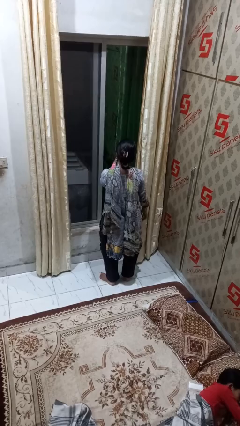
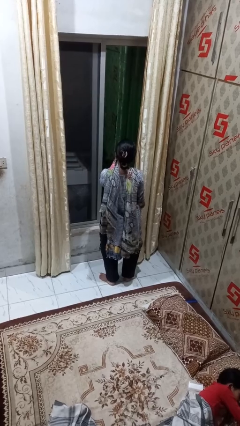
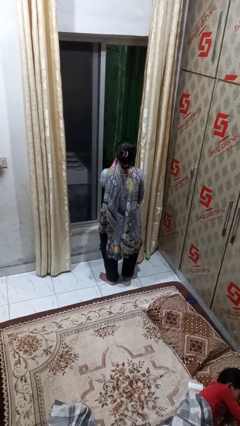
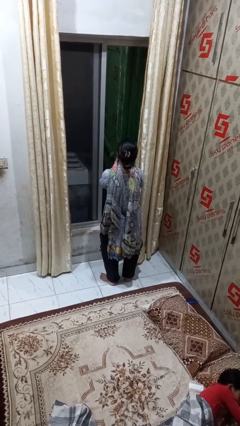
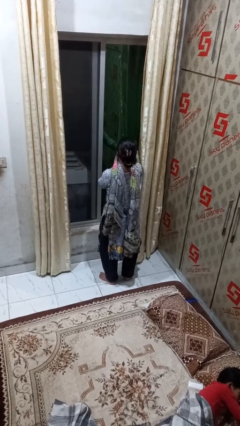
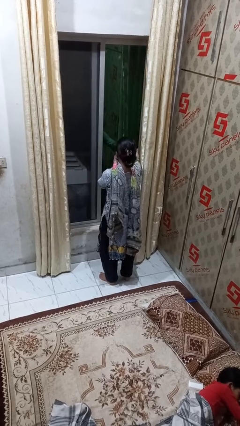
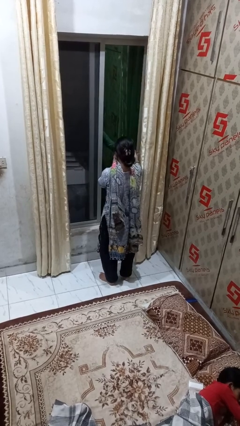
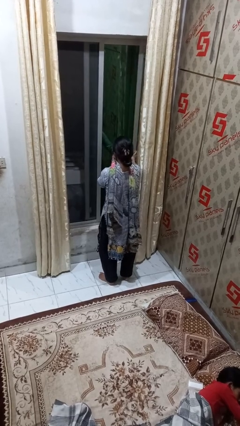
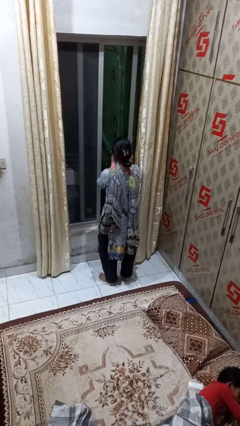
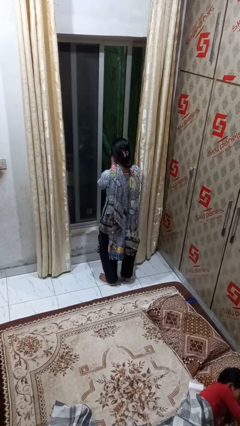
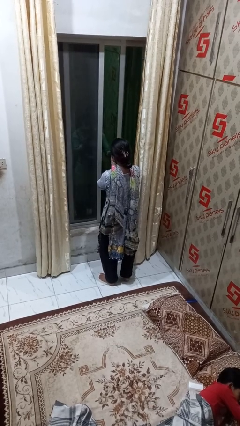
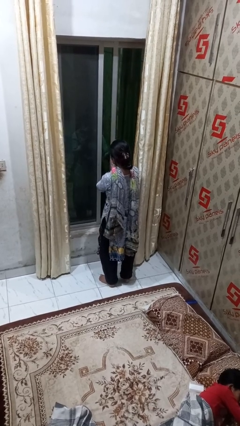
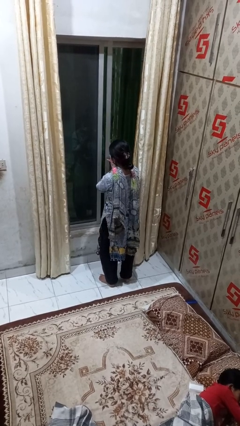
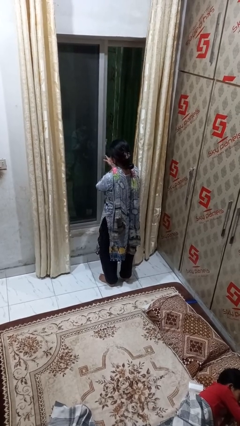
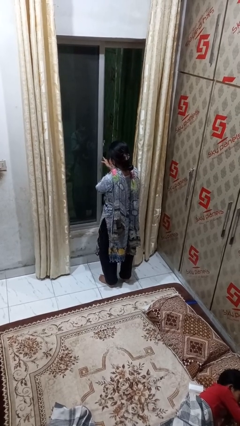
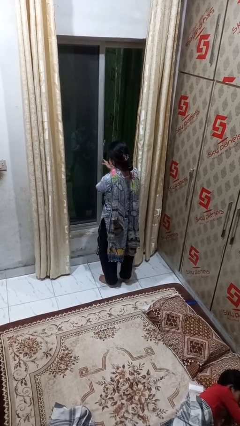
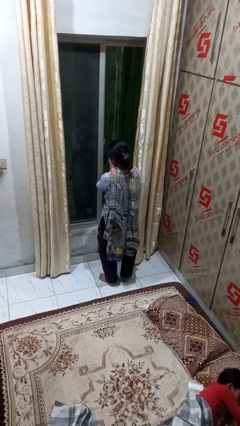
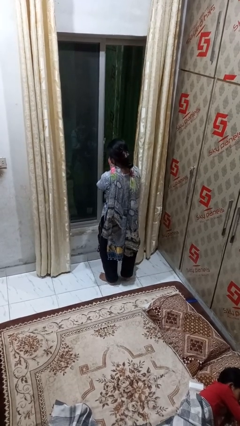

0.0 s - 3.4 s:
person closes home window

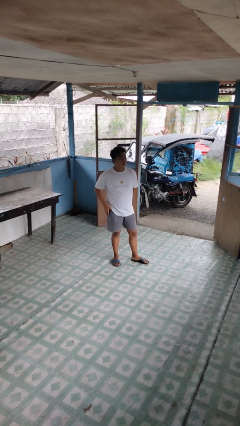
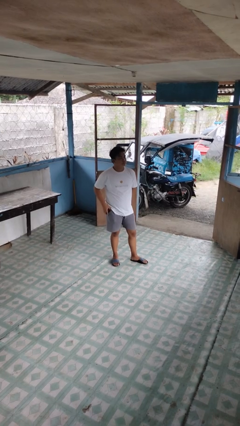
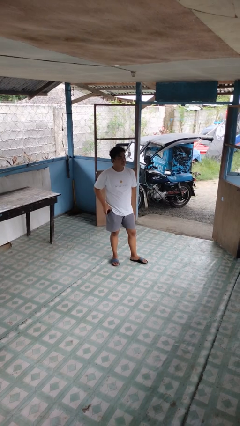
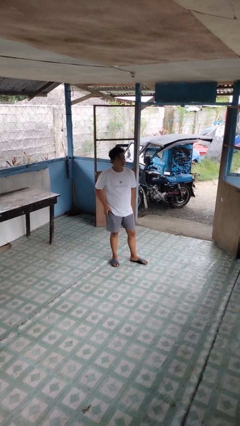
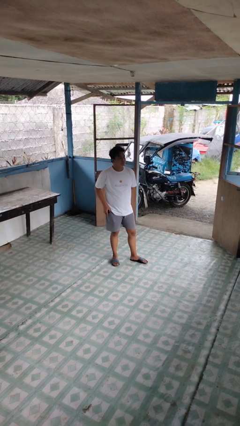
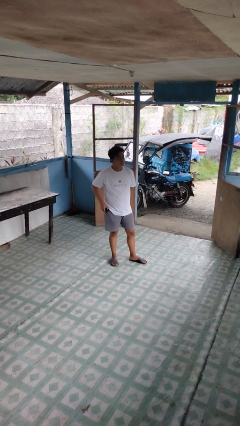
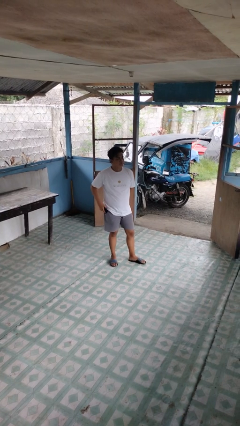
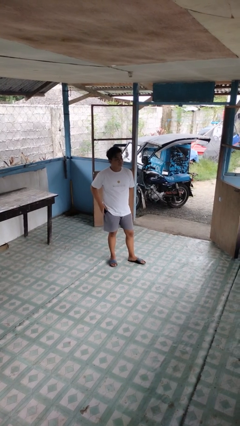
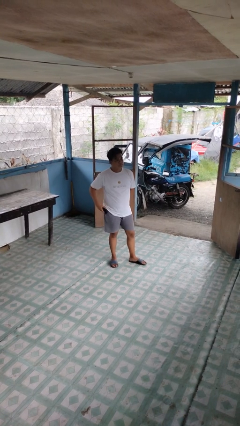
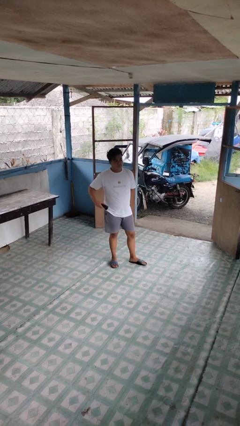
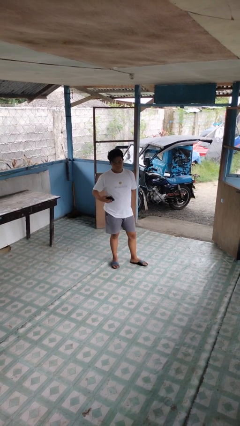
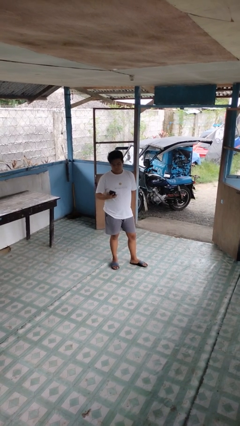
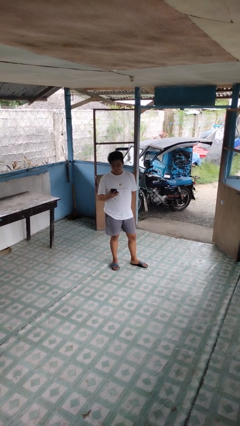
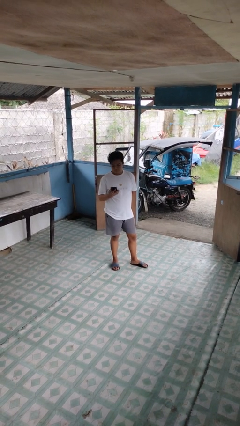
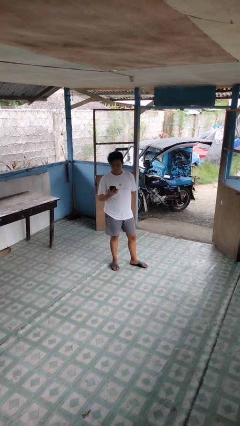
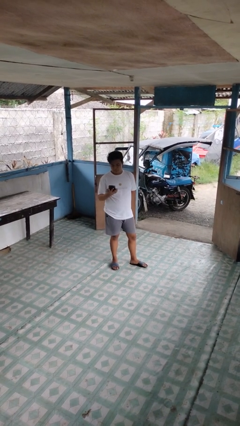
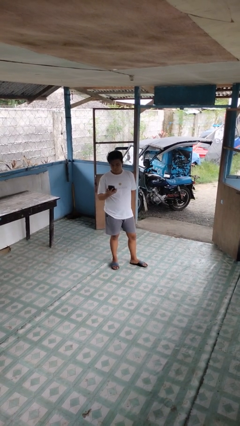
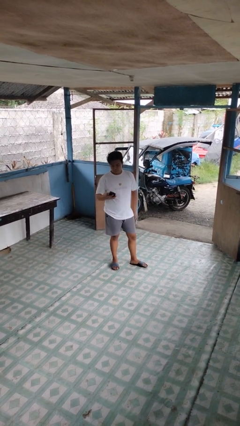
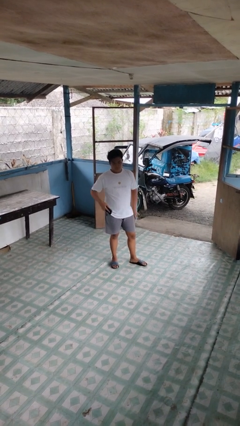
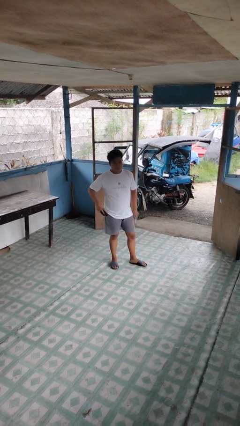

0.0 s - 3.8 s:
person takes phone from pocket

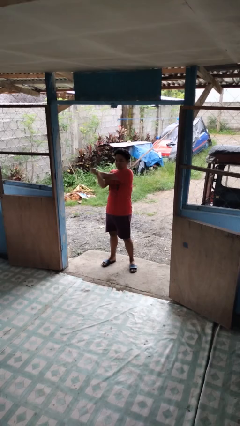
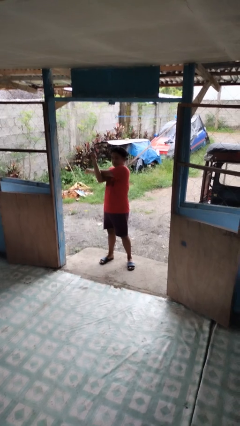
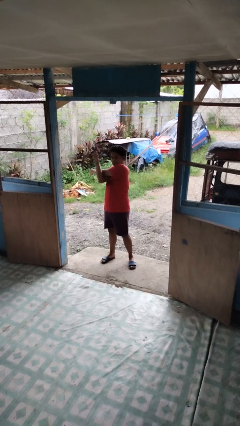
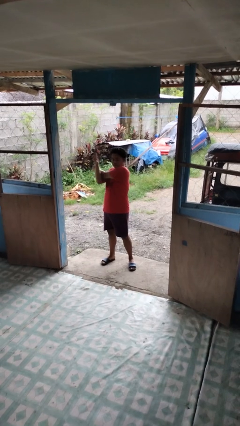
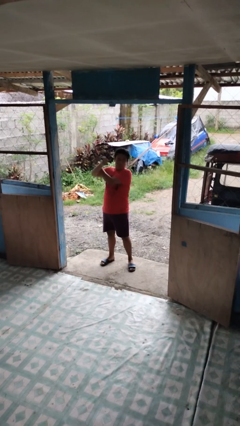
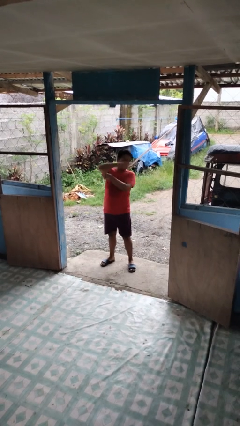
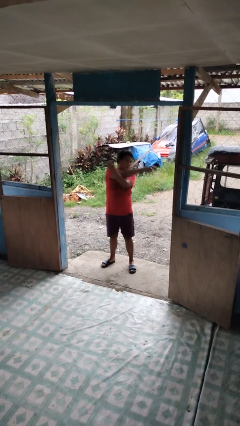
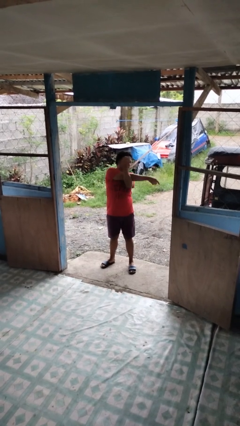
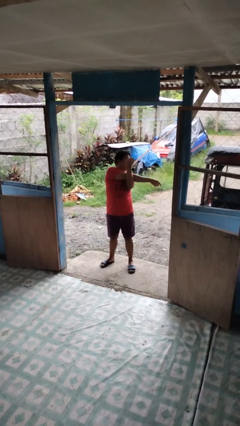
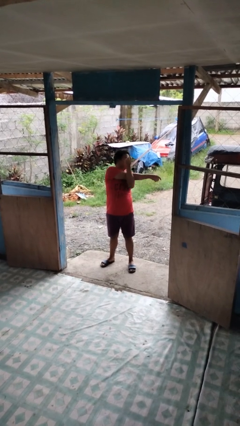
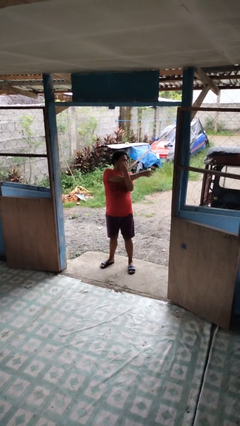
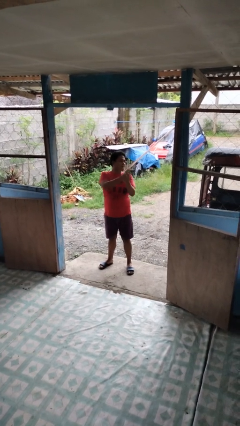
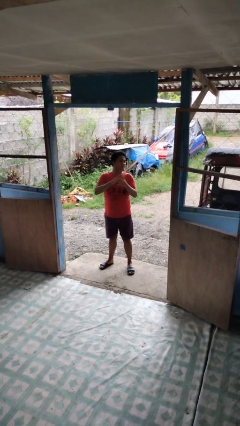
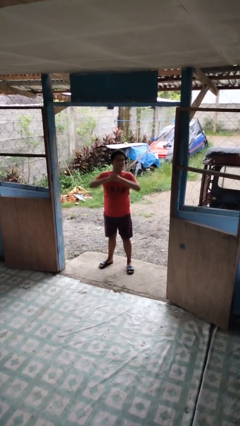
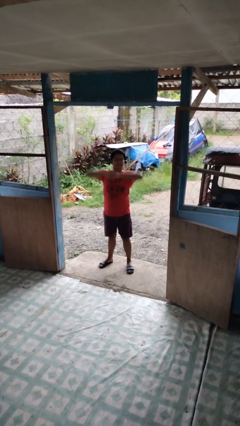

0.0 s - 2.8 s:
person stretches arms to side

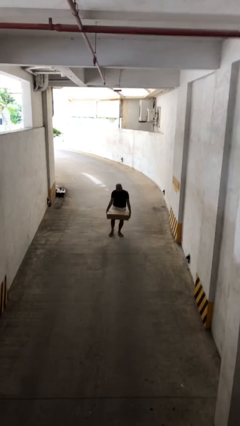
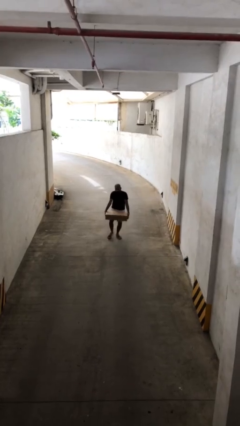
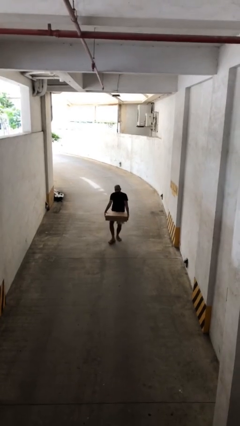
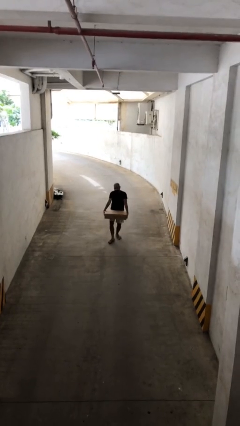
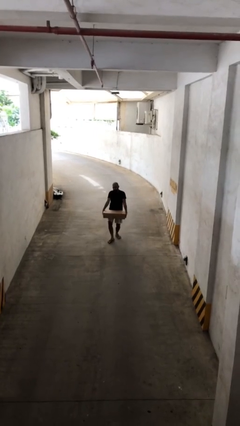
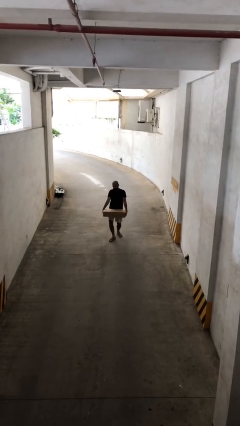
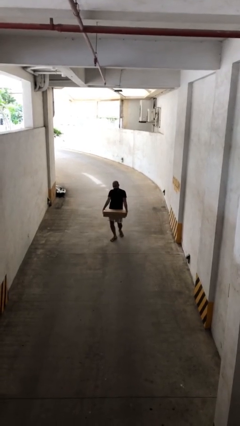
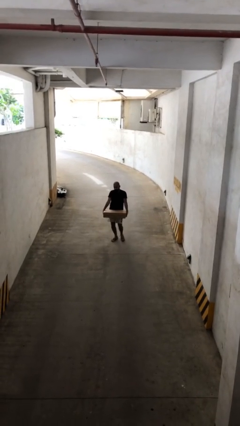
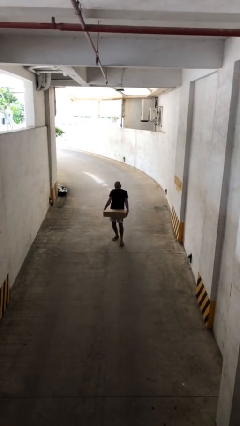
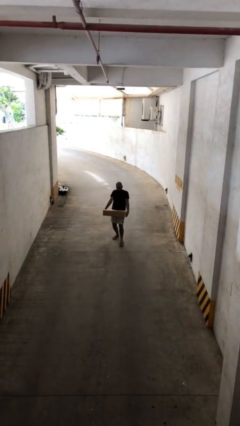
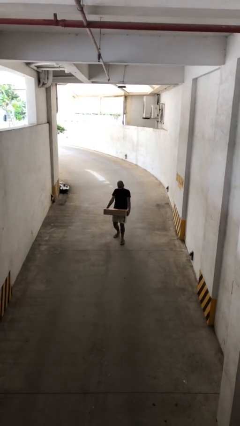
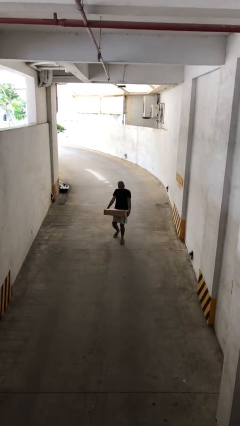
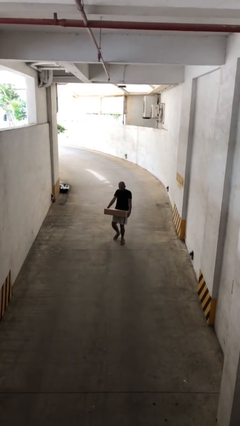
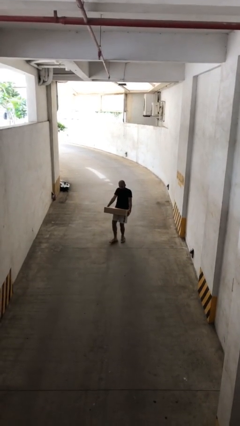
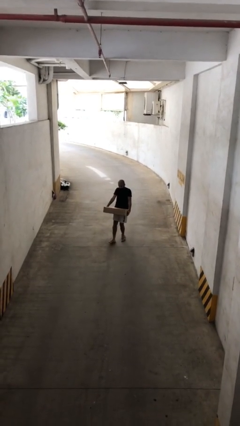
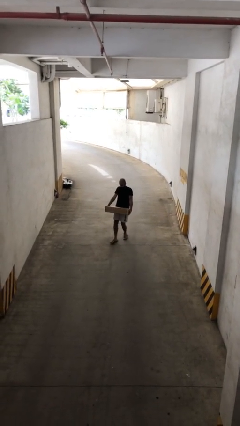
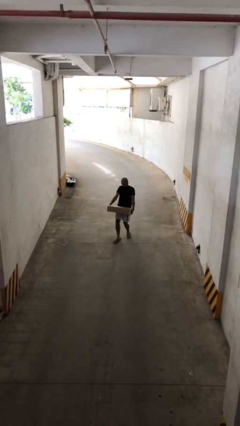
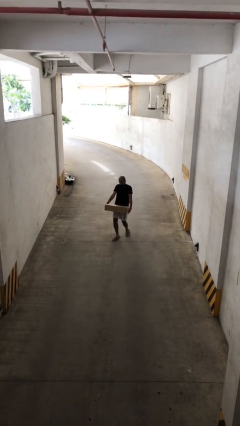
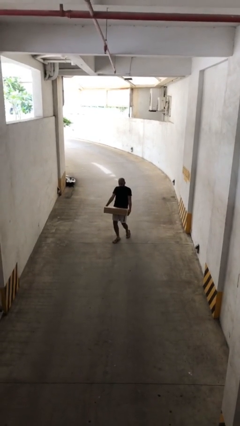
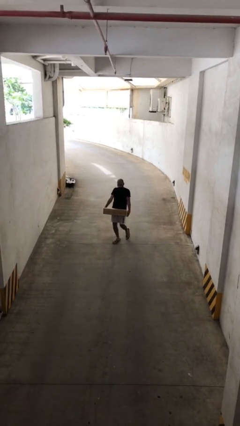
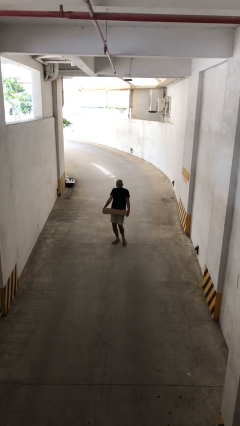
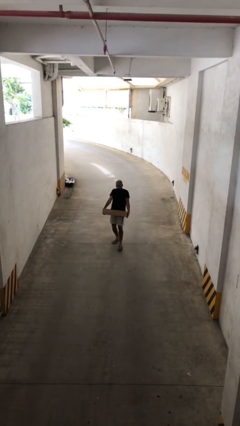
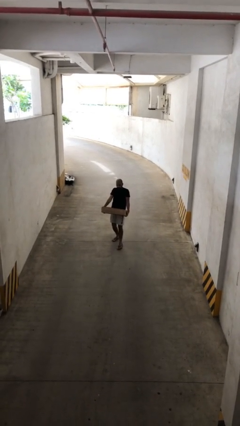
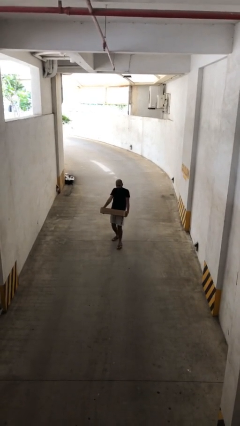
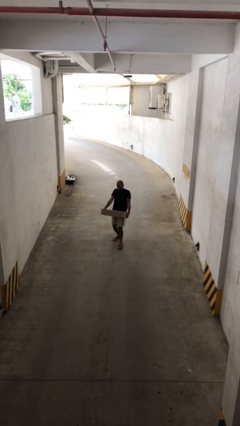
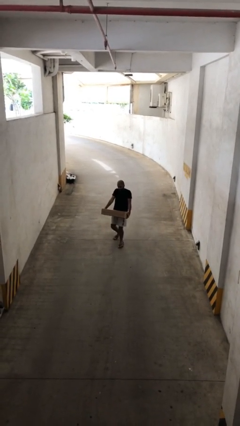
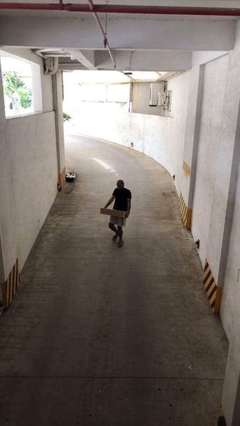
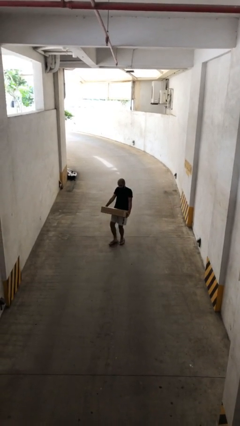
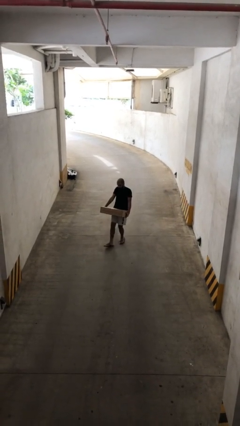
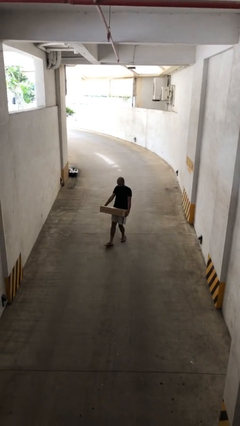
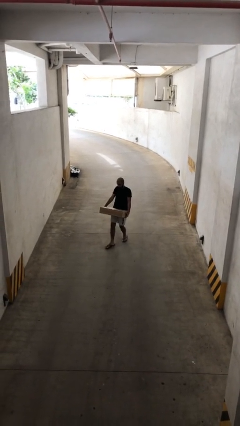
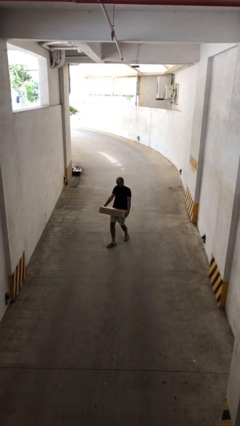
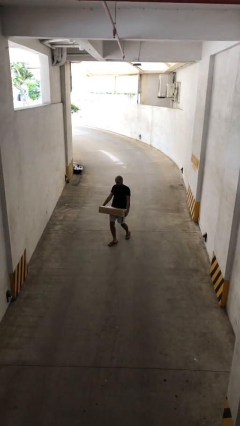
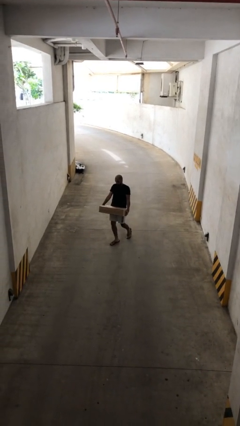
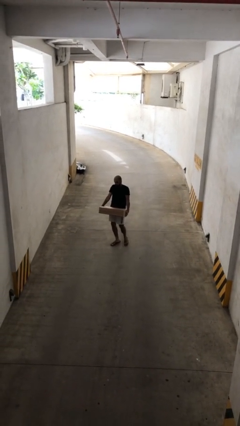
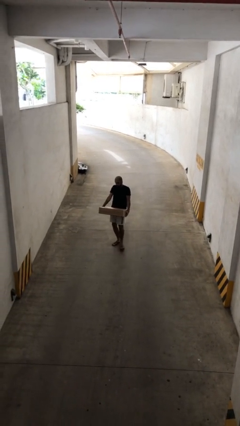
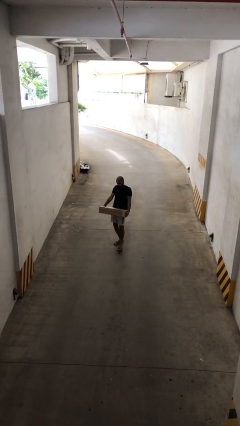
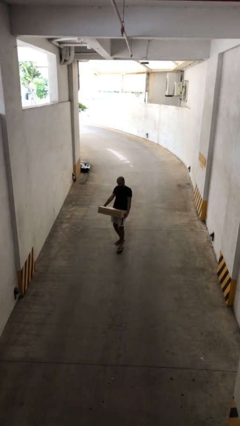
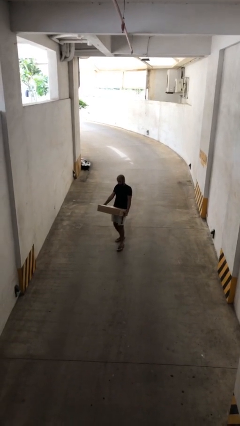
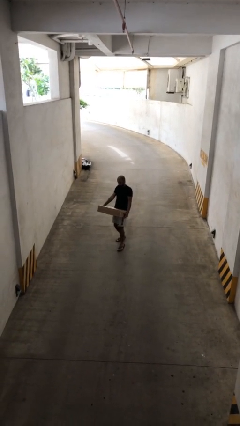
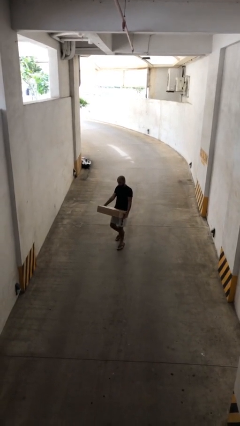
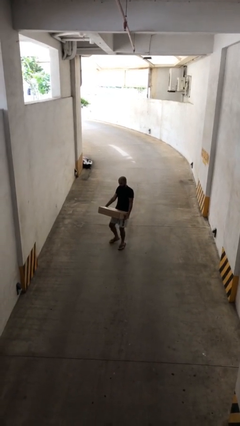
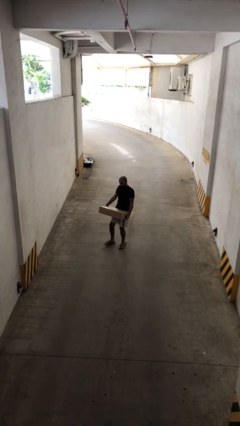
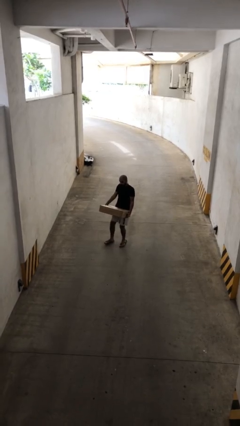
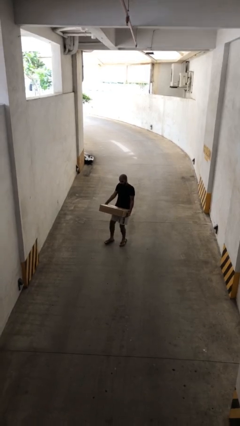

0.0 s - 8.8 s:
person carries heavy object
